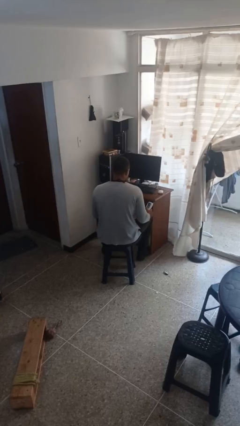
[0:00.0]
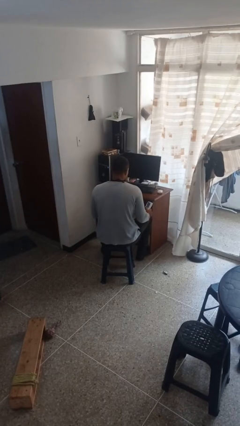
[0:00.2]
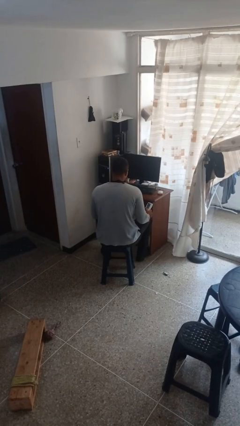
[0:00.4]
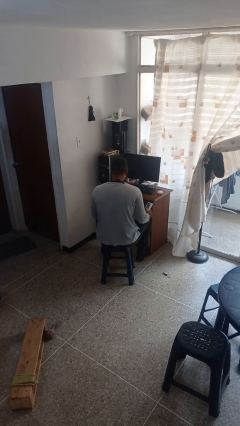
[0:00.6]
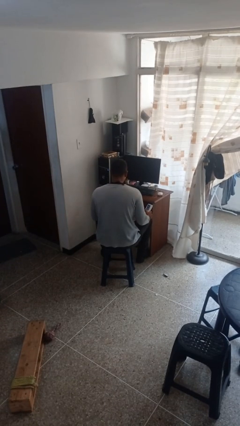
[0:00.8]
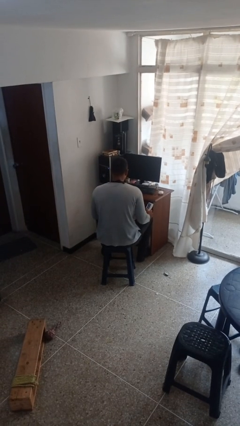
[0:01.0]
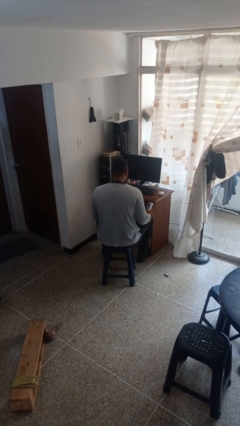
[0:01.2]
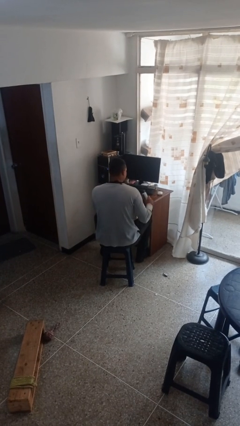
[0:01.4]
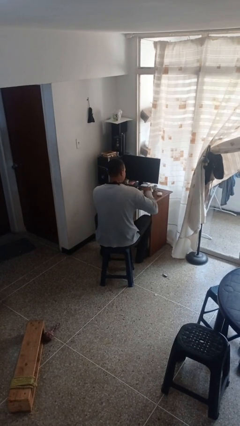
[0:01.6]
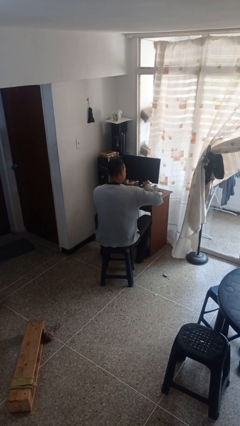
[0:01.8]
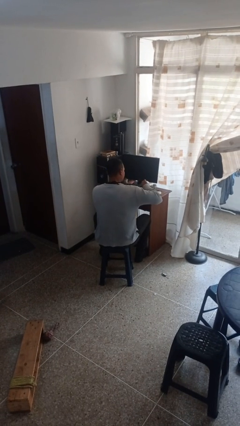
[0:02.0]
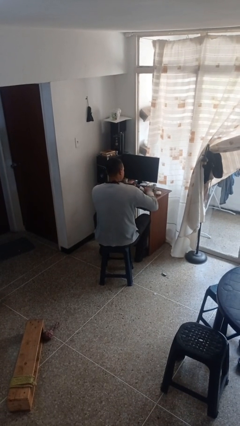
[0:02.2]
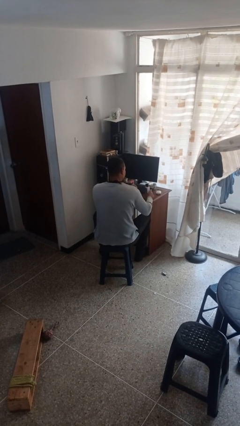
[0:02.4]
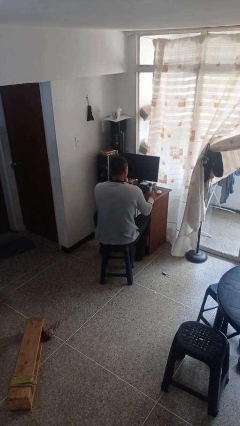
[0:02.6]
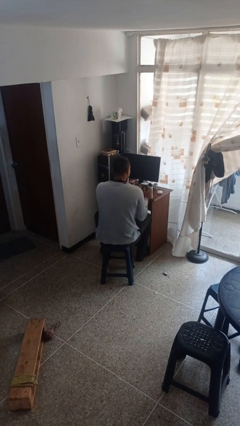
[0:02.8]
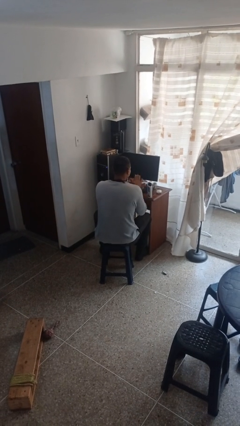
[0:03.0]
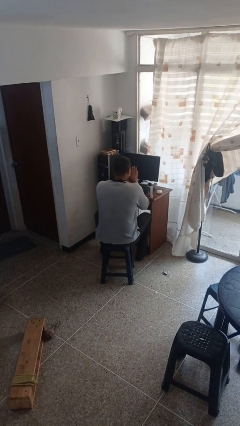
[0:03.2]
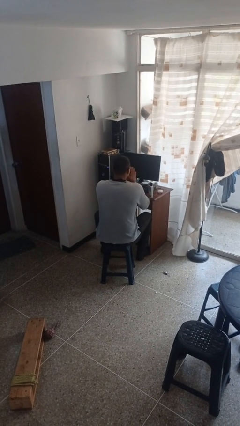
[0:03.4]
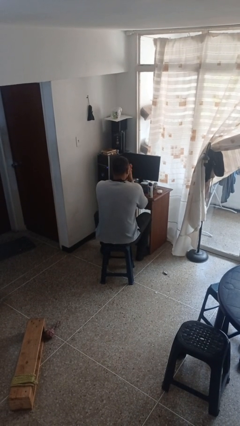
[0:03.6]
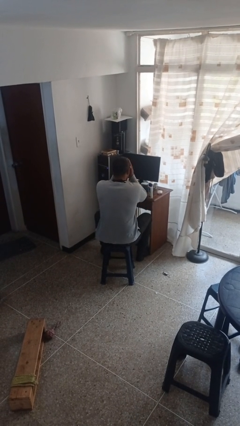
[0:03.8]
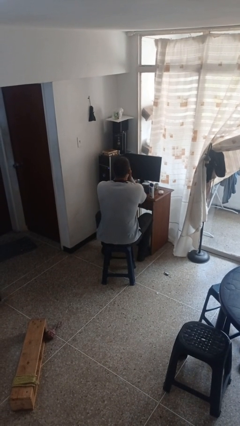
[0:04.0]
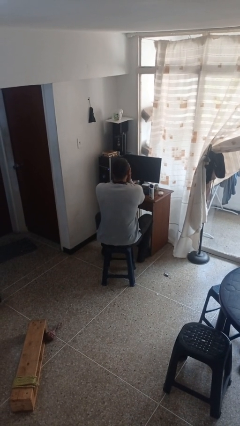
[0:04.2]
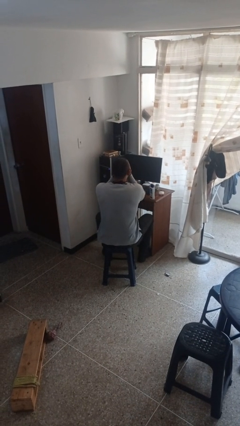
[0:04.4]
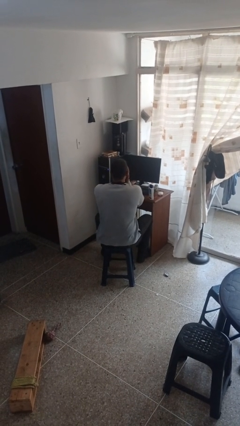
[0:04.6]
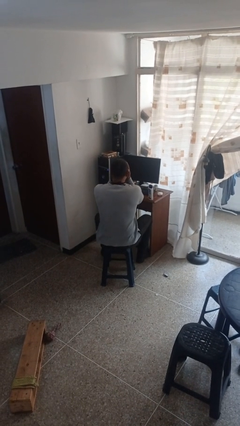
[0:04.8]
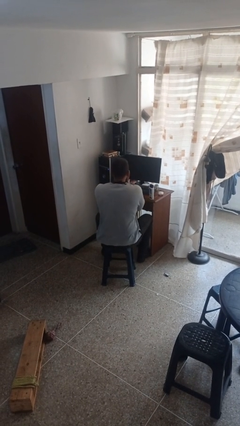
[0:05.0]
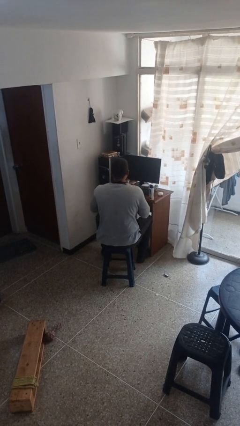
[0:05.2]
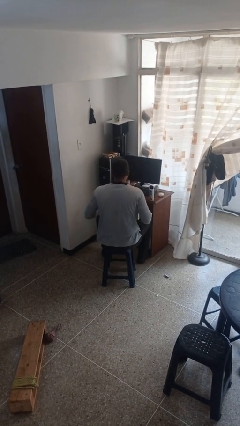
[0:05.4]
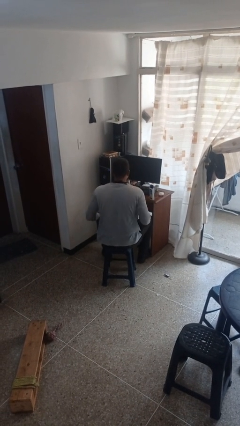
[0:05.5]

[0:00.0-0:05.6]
person applies facial moisturizer

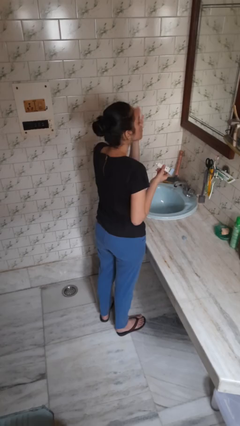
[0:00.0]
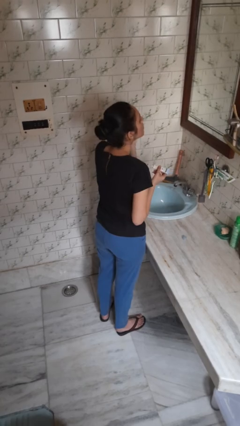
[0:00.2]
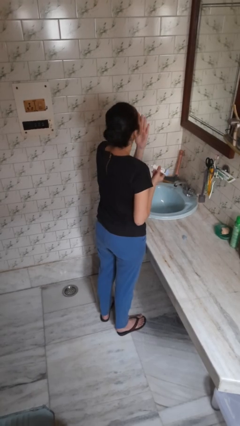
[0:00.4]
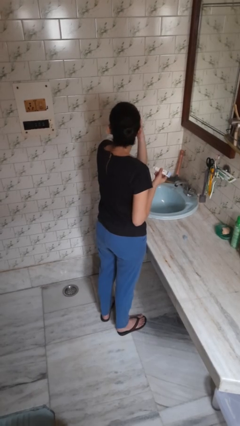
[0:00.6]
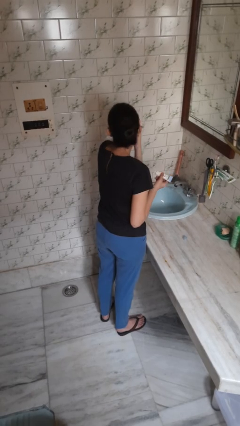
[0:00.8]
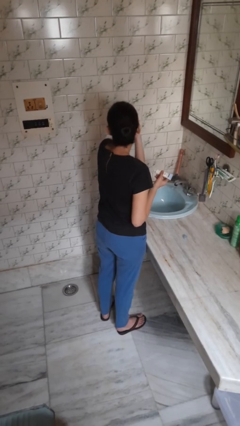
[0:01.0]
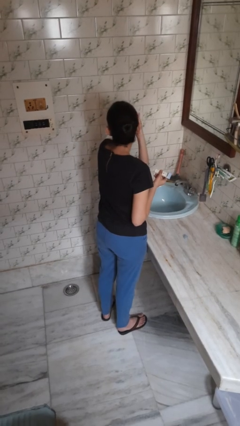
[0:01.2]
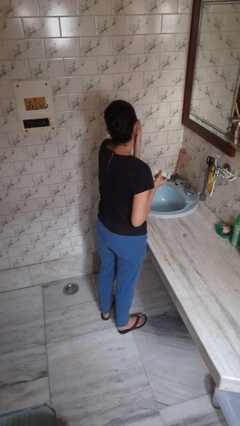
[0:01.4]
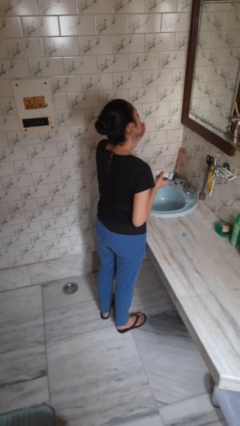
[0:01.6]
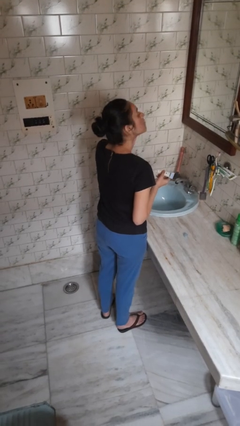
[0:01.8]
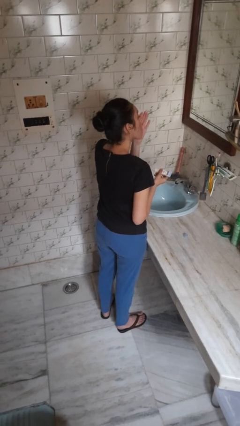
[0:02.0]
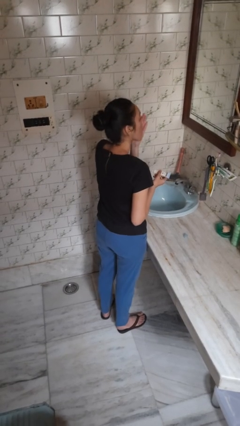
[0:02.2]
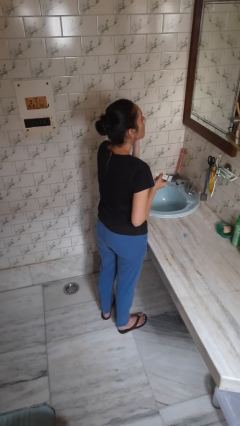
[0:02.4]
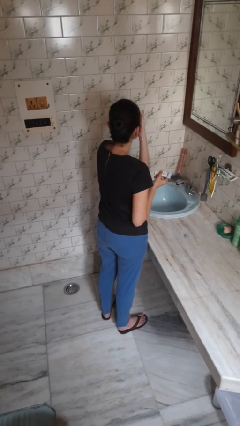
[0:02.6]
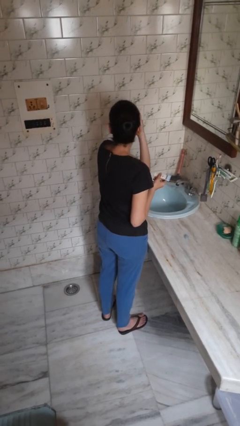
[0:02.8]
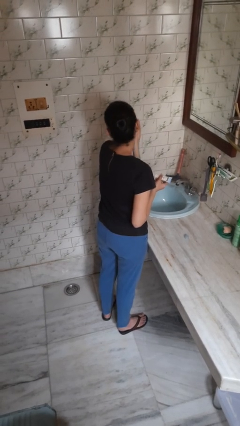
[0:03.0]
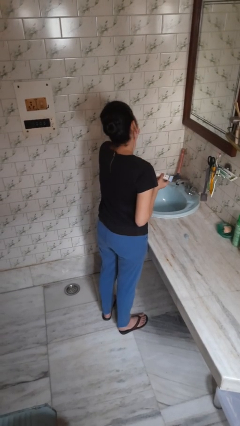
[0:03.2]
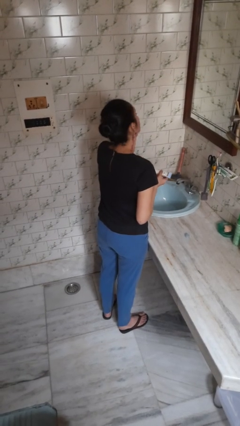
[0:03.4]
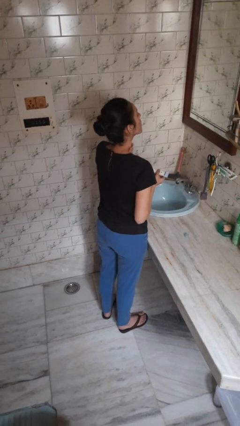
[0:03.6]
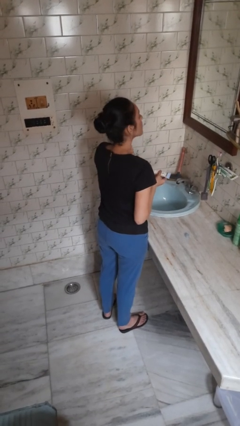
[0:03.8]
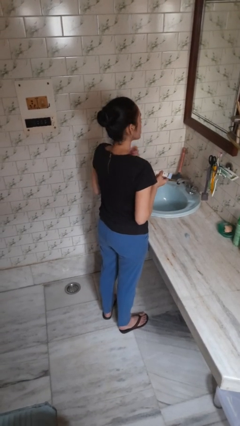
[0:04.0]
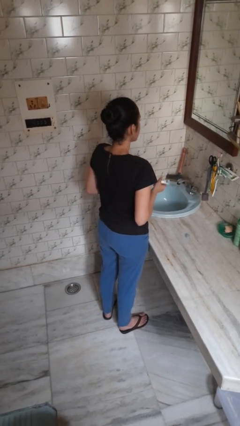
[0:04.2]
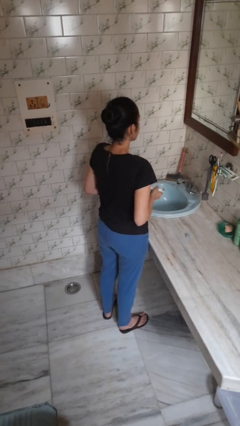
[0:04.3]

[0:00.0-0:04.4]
person applies sunscreen

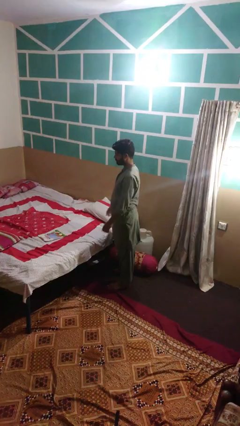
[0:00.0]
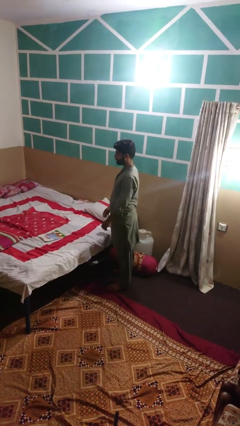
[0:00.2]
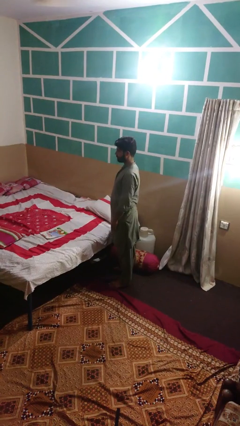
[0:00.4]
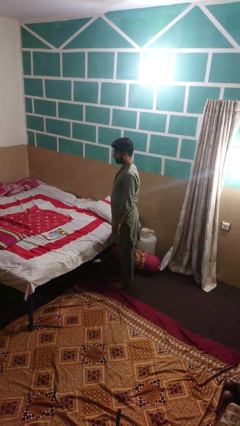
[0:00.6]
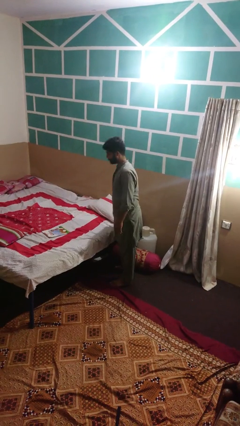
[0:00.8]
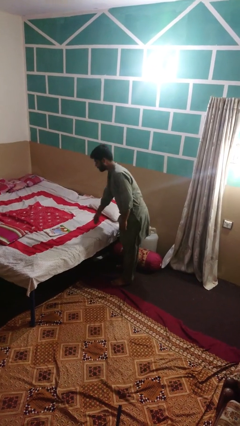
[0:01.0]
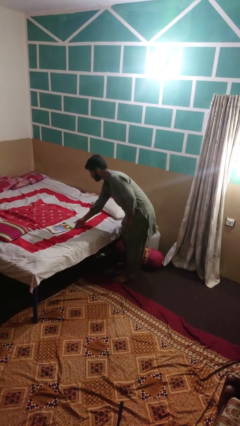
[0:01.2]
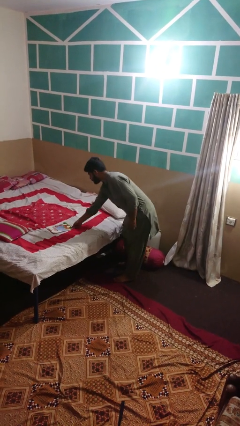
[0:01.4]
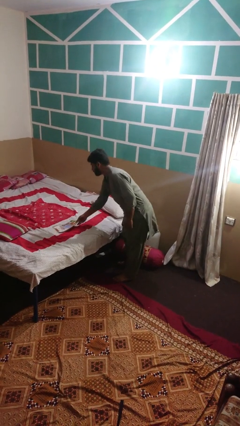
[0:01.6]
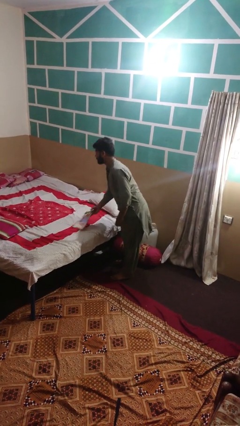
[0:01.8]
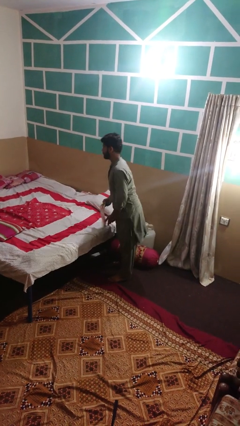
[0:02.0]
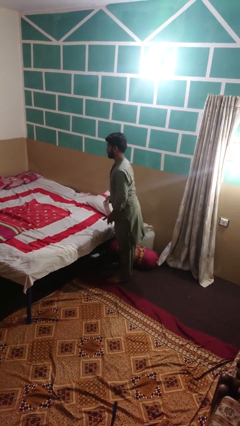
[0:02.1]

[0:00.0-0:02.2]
person picks up object from bed

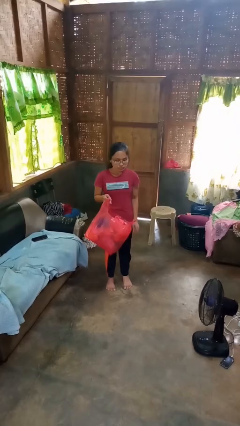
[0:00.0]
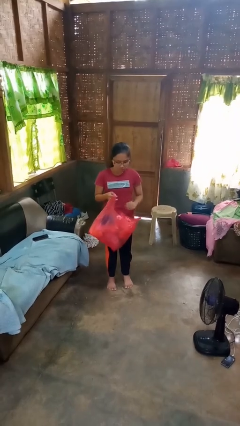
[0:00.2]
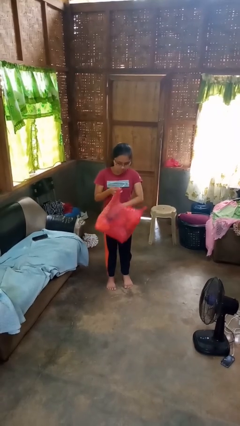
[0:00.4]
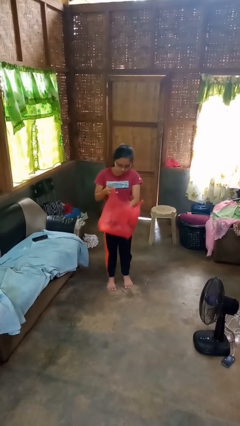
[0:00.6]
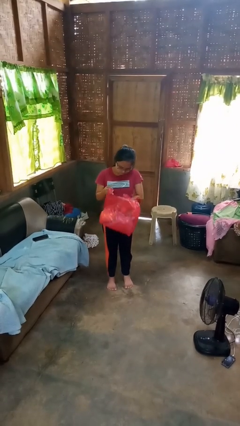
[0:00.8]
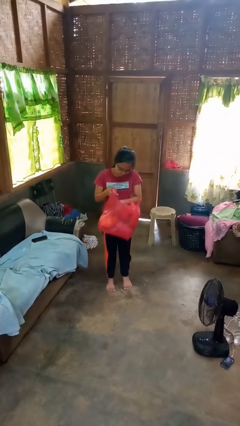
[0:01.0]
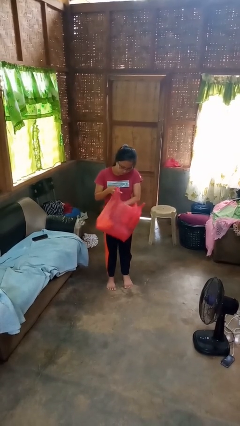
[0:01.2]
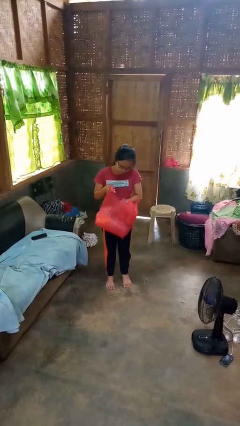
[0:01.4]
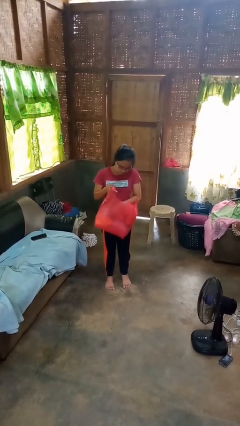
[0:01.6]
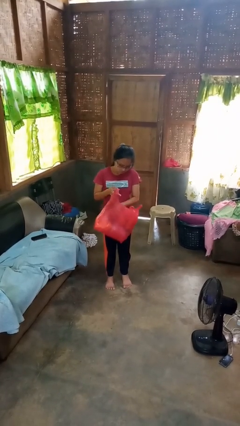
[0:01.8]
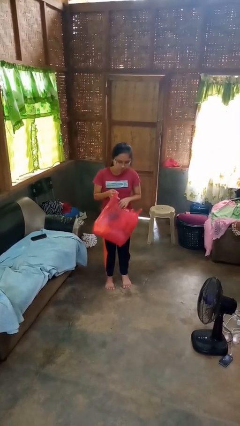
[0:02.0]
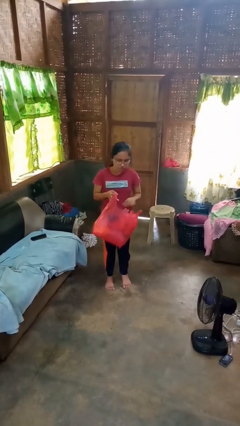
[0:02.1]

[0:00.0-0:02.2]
person searches in bag

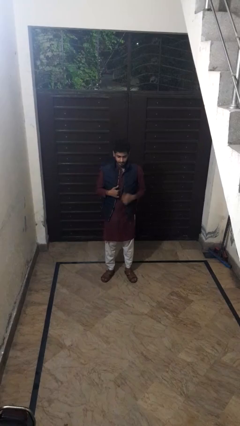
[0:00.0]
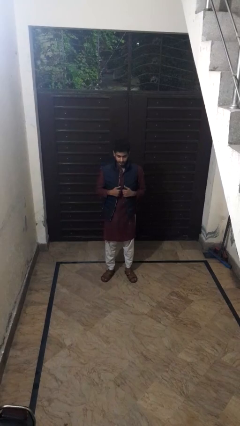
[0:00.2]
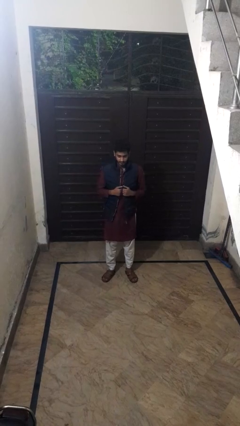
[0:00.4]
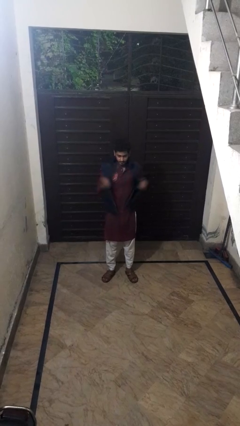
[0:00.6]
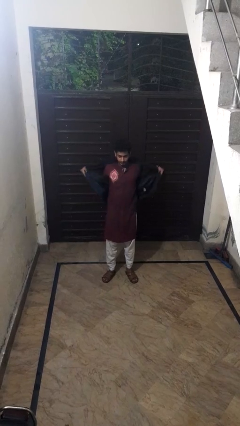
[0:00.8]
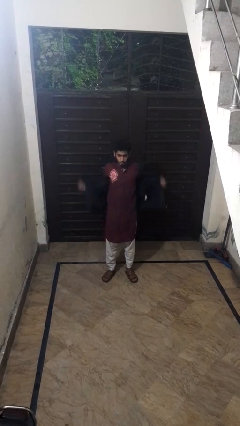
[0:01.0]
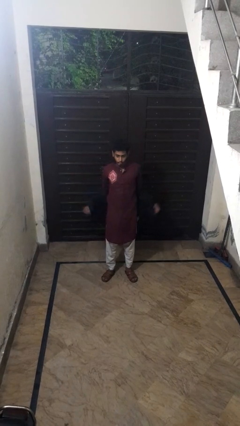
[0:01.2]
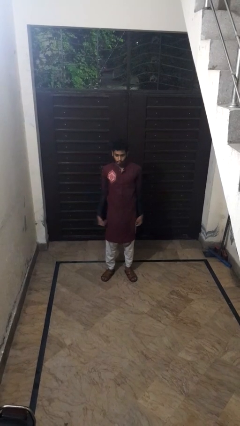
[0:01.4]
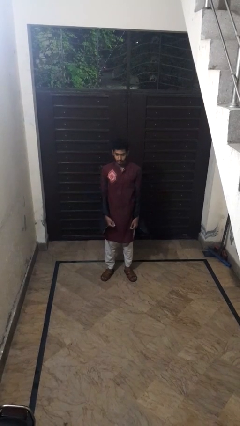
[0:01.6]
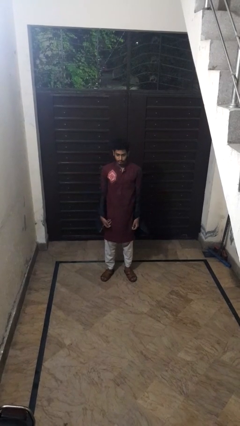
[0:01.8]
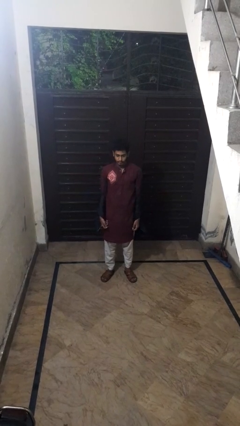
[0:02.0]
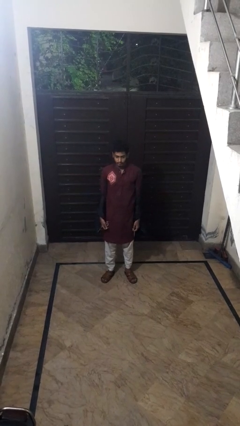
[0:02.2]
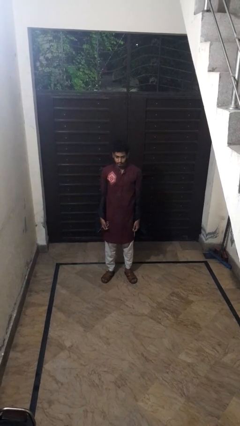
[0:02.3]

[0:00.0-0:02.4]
person takes off jacket

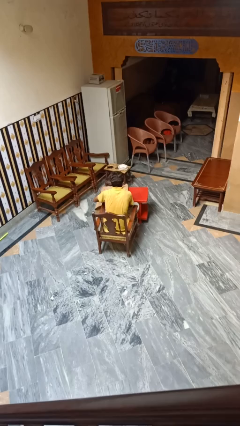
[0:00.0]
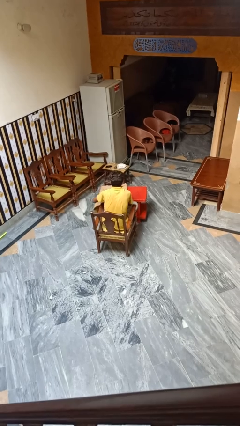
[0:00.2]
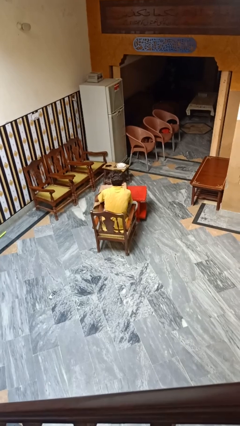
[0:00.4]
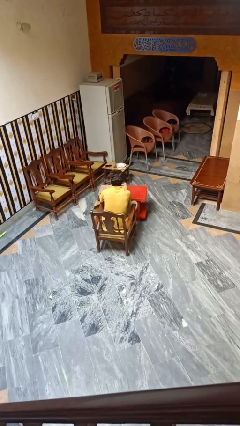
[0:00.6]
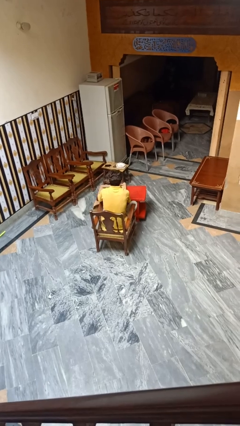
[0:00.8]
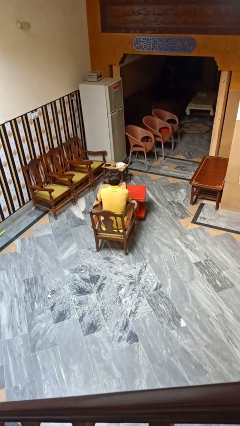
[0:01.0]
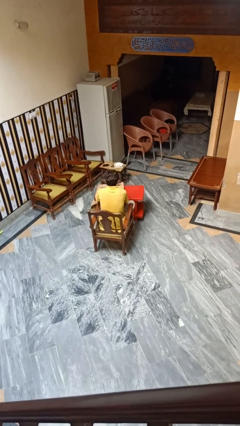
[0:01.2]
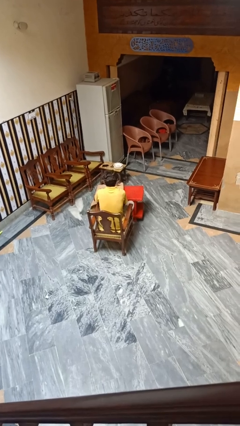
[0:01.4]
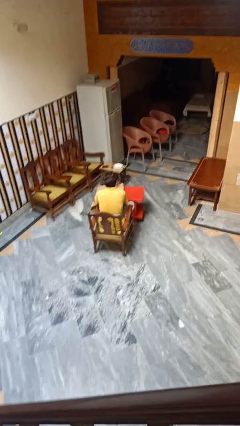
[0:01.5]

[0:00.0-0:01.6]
person folds tablecloth
